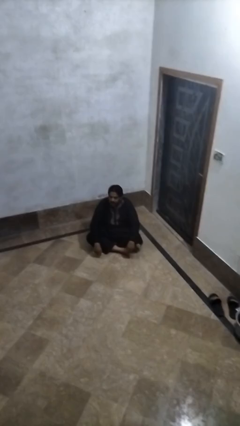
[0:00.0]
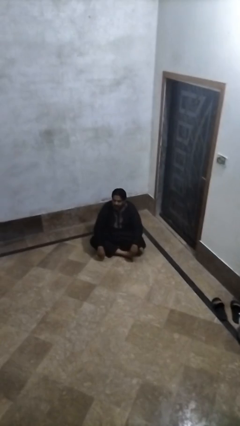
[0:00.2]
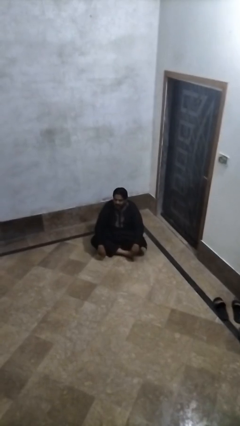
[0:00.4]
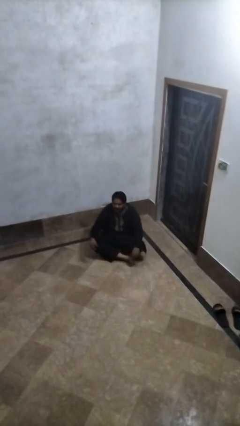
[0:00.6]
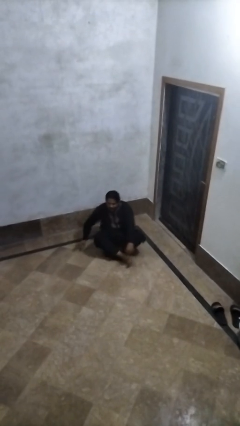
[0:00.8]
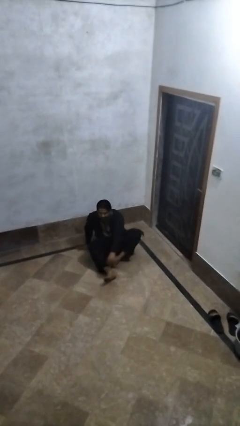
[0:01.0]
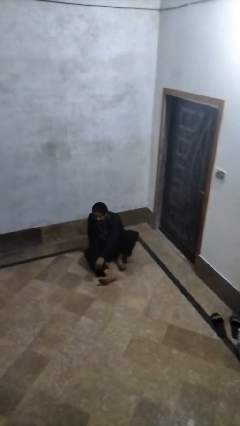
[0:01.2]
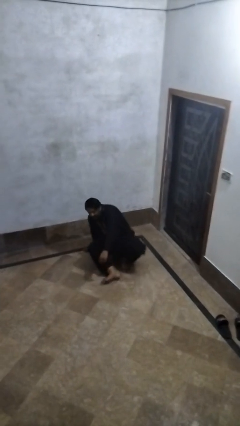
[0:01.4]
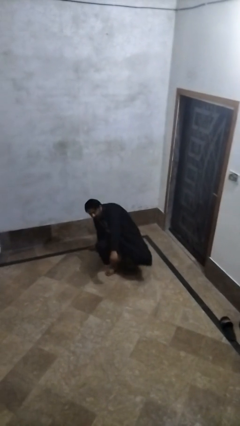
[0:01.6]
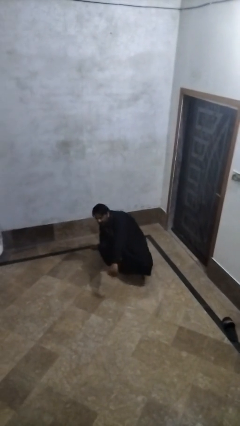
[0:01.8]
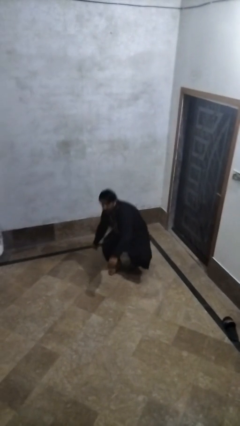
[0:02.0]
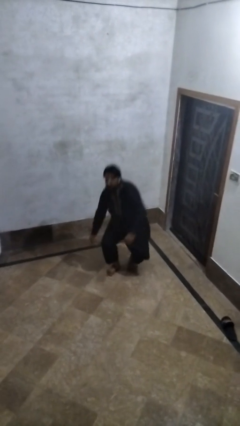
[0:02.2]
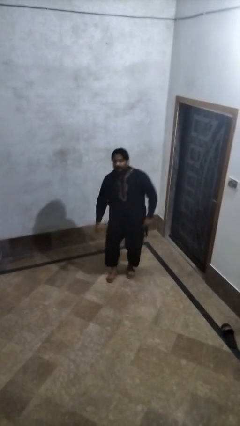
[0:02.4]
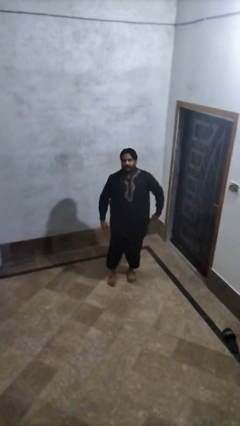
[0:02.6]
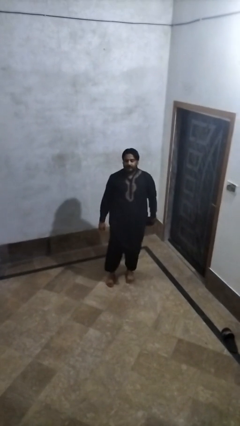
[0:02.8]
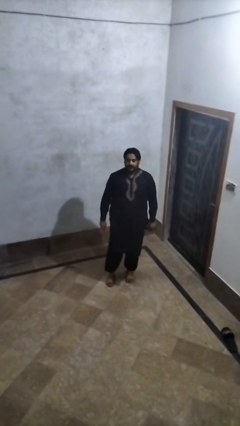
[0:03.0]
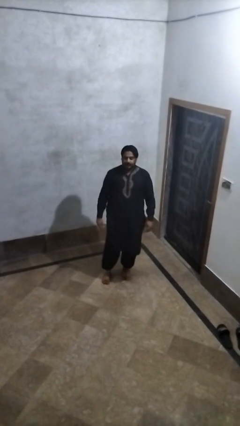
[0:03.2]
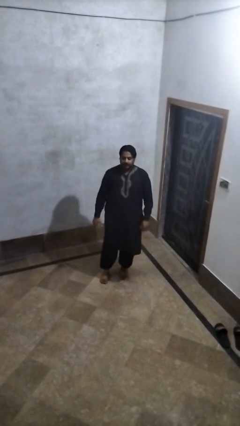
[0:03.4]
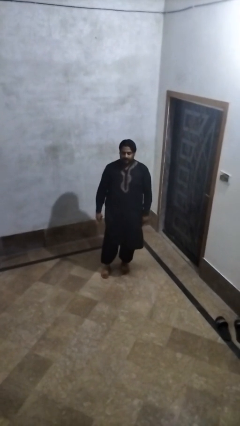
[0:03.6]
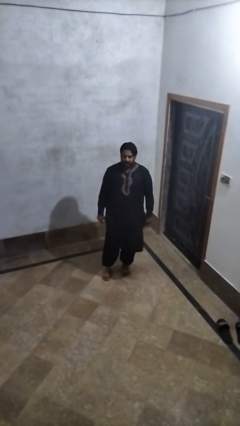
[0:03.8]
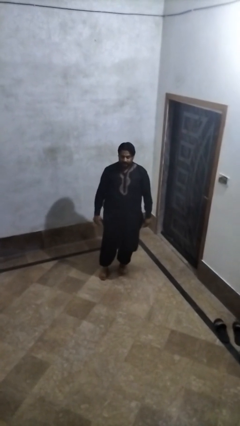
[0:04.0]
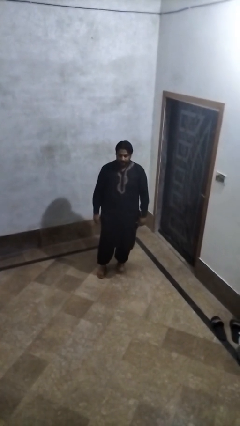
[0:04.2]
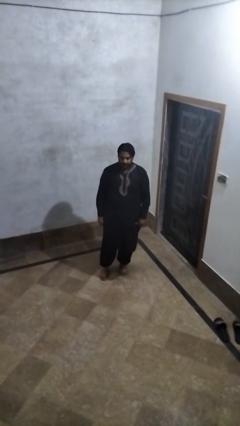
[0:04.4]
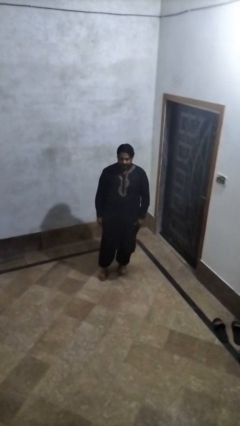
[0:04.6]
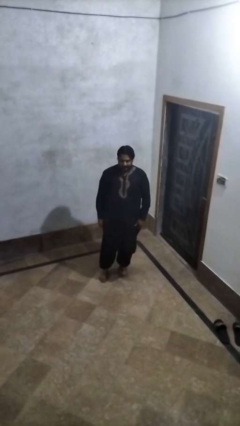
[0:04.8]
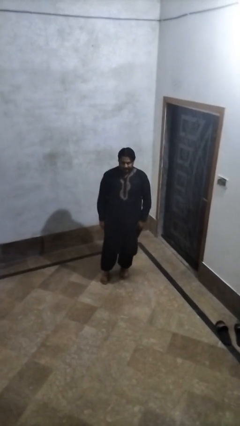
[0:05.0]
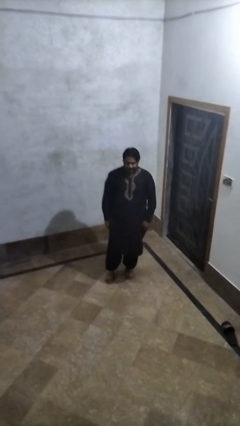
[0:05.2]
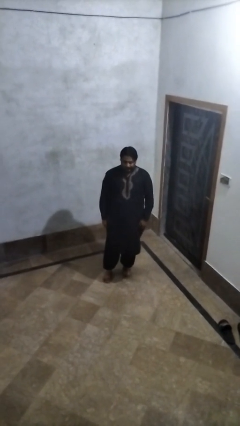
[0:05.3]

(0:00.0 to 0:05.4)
person stands up from floor

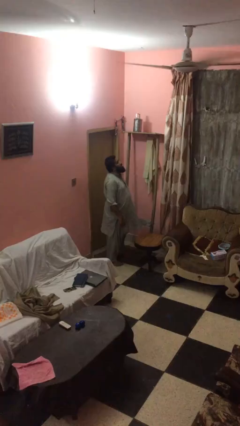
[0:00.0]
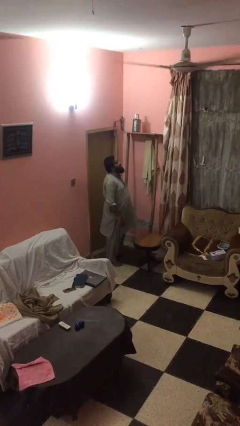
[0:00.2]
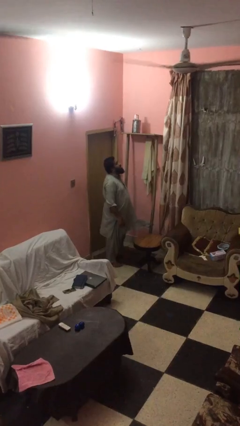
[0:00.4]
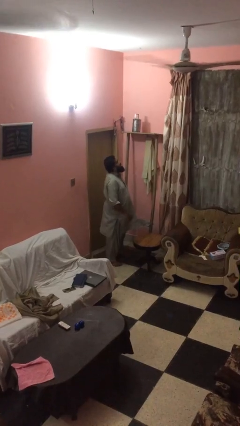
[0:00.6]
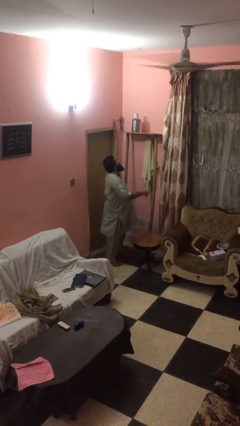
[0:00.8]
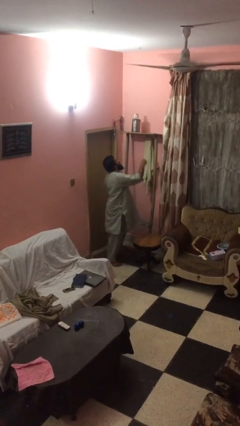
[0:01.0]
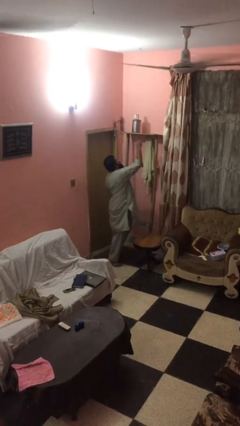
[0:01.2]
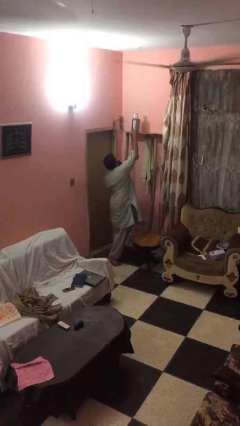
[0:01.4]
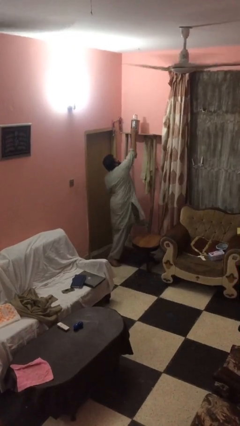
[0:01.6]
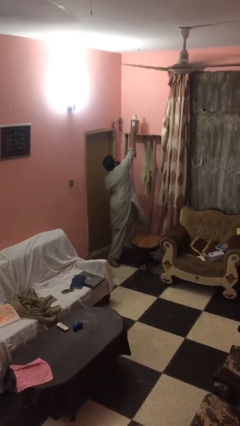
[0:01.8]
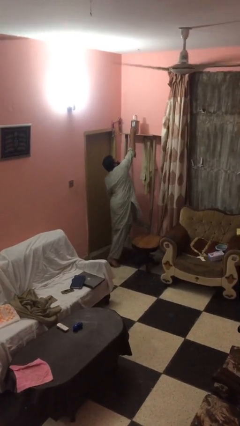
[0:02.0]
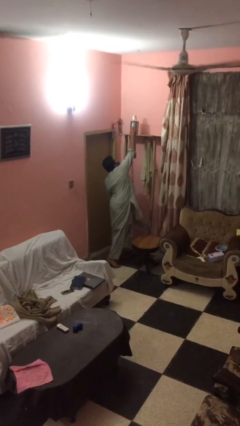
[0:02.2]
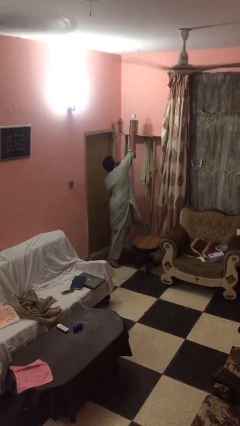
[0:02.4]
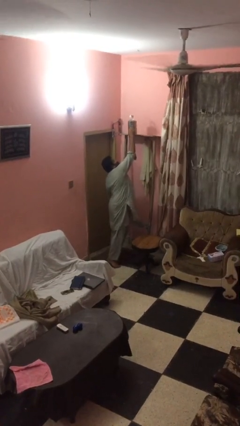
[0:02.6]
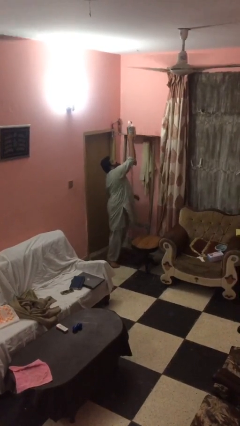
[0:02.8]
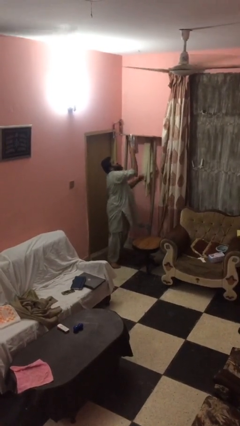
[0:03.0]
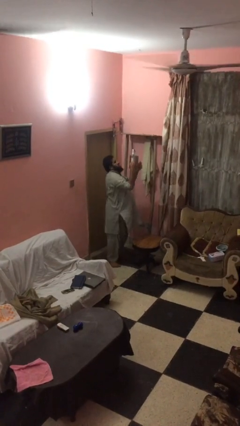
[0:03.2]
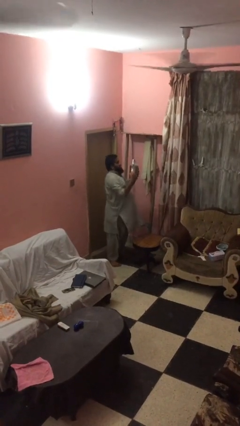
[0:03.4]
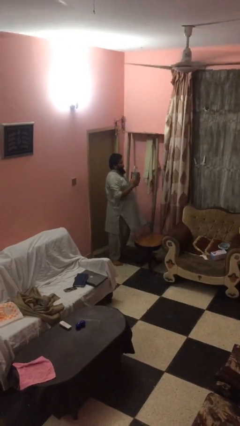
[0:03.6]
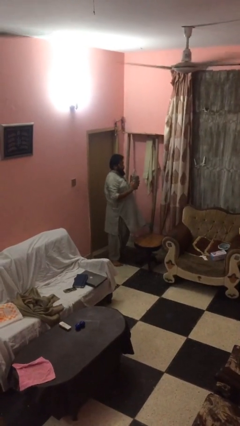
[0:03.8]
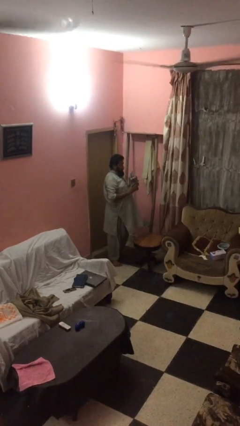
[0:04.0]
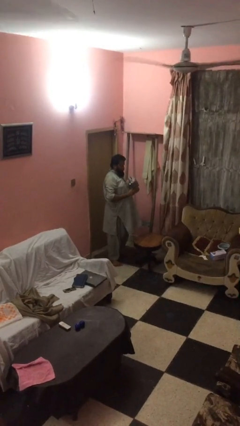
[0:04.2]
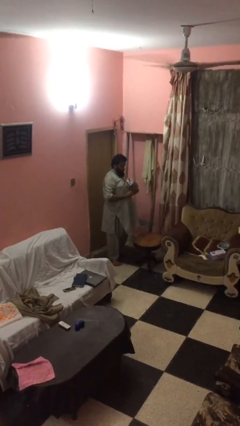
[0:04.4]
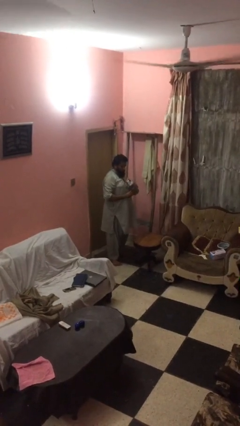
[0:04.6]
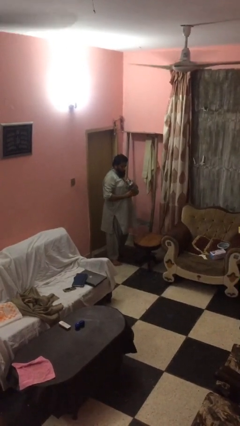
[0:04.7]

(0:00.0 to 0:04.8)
person picks up object from shelf

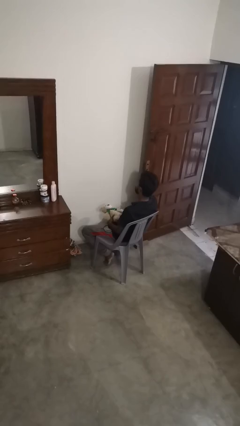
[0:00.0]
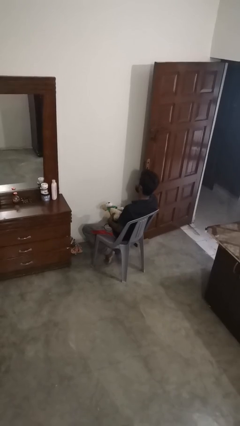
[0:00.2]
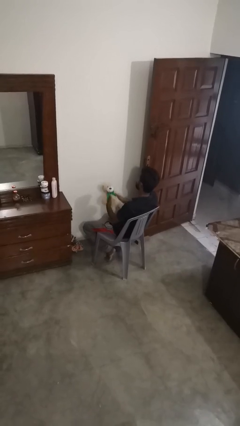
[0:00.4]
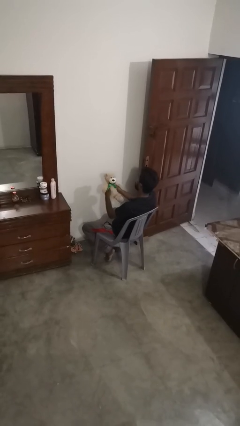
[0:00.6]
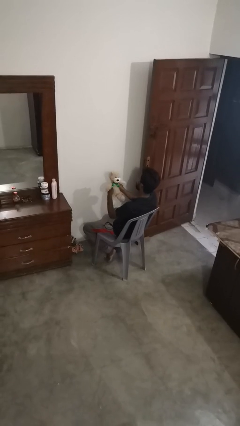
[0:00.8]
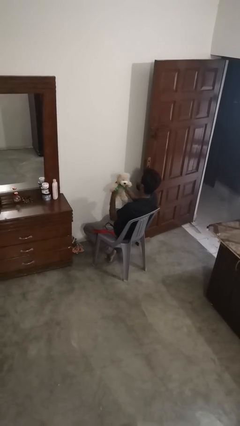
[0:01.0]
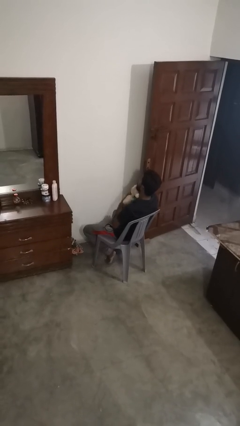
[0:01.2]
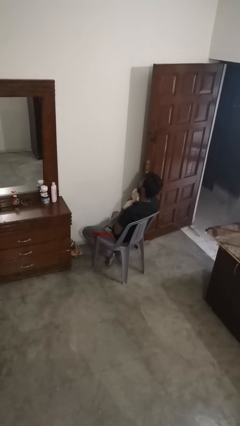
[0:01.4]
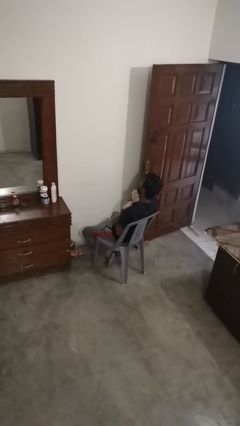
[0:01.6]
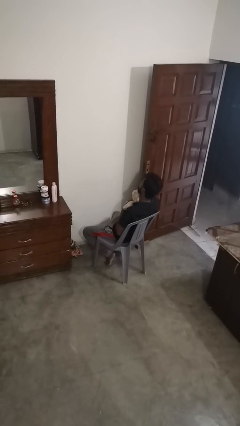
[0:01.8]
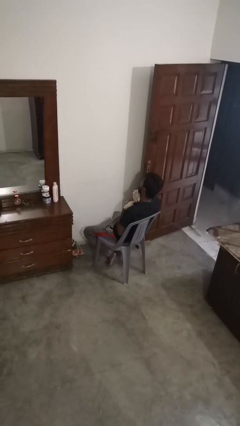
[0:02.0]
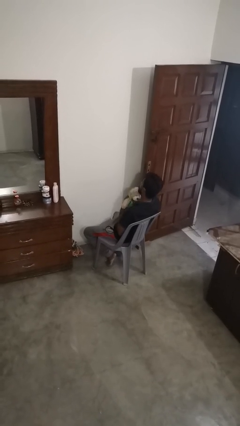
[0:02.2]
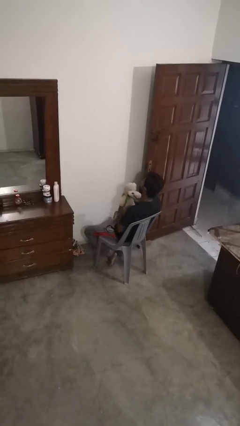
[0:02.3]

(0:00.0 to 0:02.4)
person hugs stuffed animal

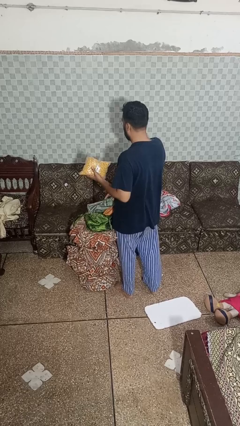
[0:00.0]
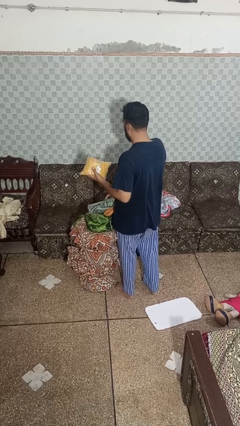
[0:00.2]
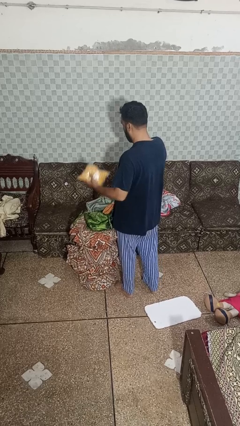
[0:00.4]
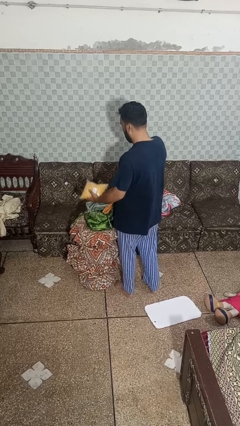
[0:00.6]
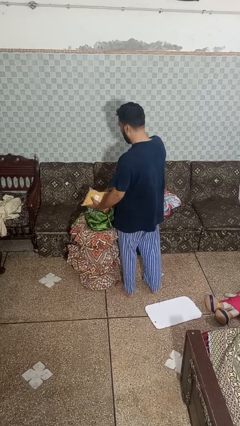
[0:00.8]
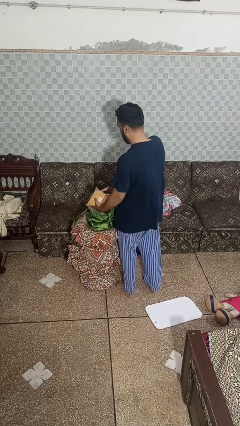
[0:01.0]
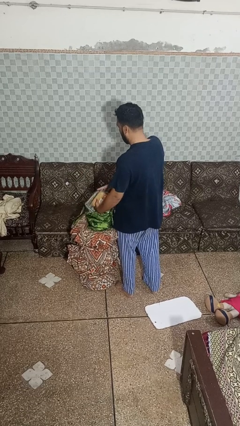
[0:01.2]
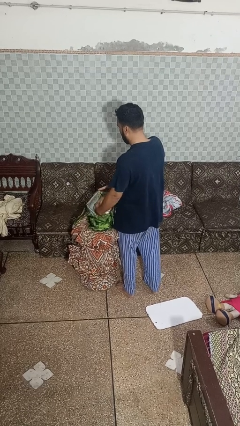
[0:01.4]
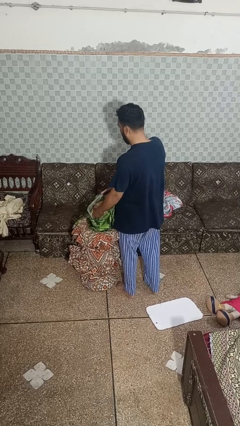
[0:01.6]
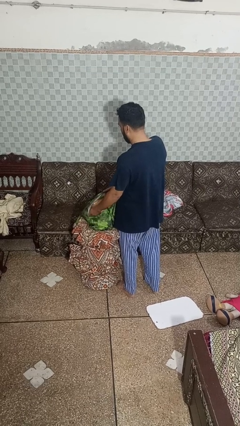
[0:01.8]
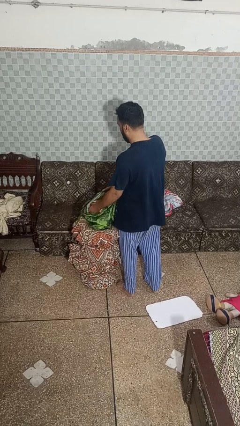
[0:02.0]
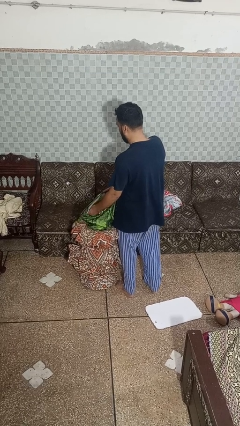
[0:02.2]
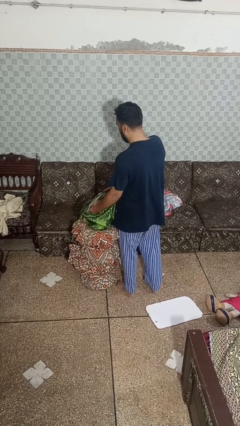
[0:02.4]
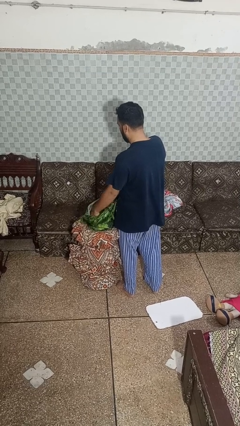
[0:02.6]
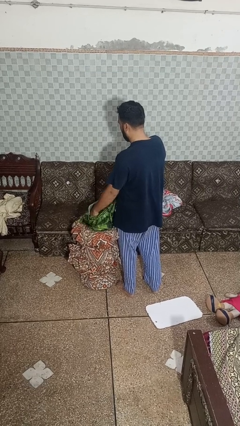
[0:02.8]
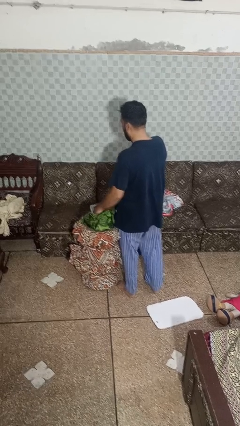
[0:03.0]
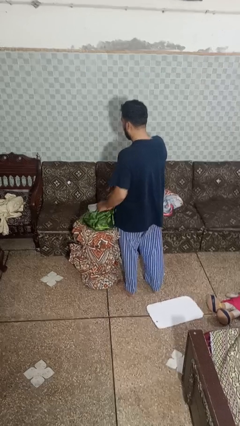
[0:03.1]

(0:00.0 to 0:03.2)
person puts object into bag

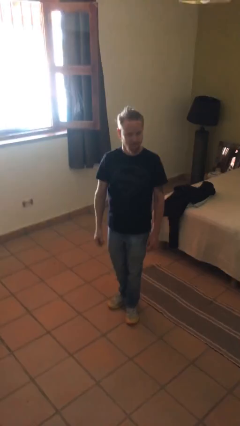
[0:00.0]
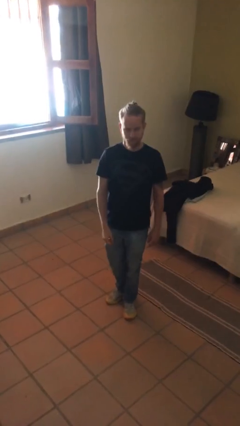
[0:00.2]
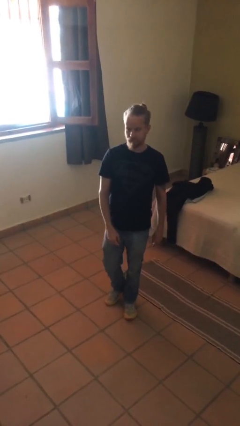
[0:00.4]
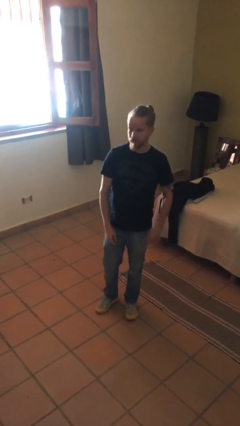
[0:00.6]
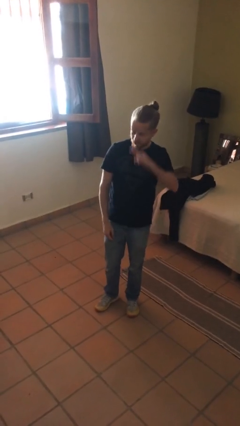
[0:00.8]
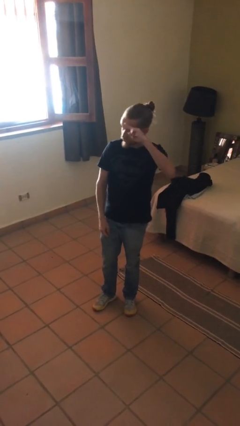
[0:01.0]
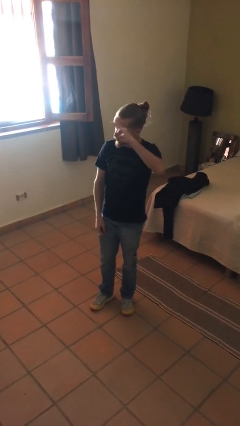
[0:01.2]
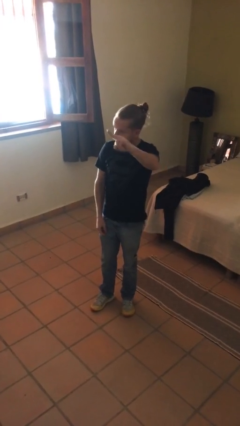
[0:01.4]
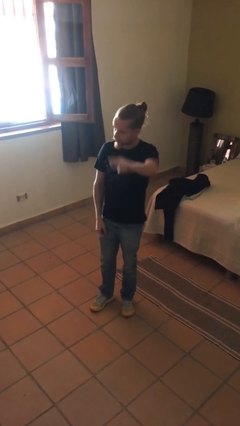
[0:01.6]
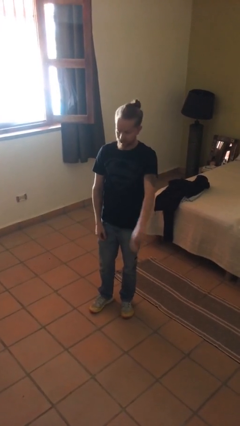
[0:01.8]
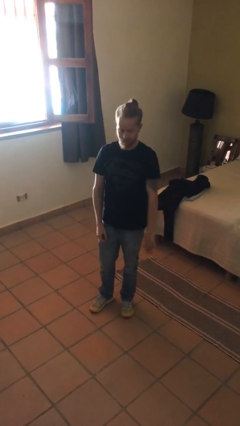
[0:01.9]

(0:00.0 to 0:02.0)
person salutes

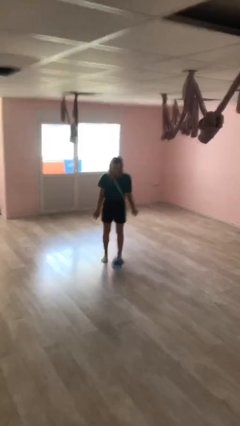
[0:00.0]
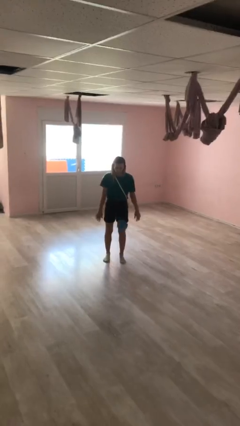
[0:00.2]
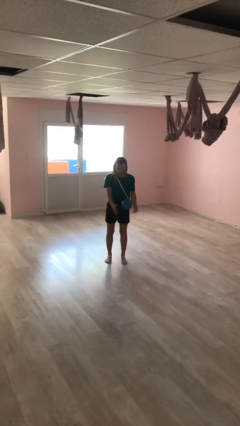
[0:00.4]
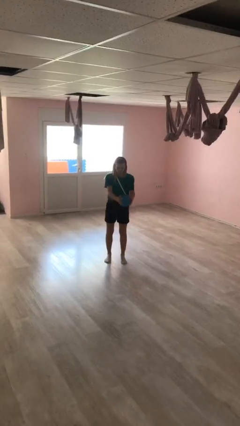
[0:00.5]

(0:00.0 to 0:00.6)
person bounces ball on floor
